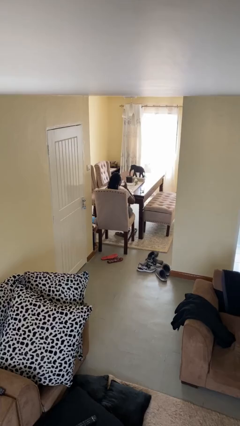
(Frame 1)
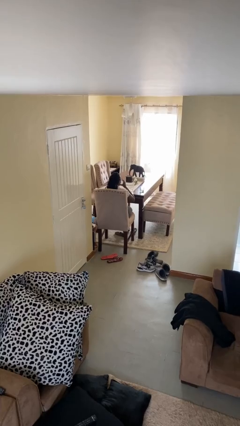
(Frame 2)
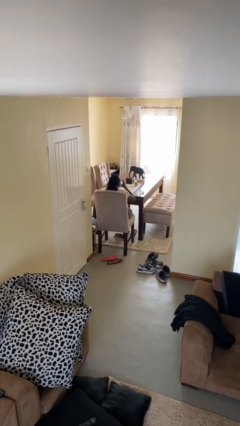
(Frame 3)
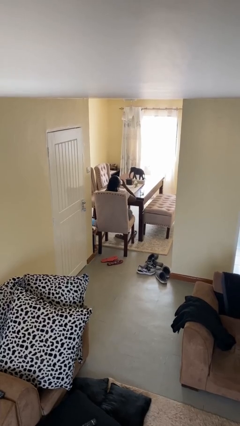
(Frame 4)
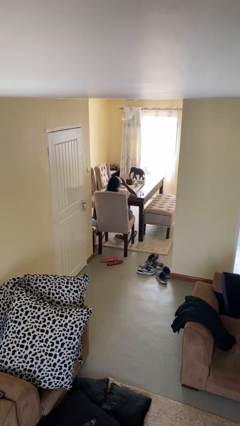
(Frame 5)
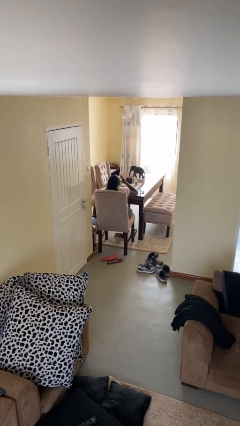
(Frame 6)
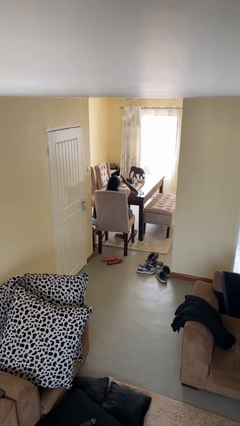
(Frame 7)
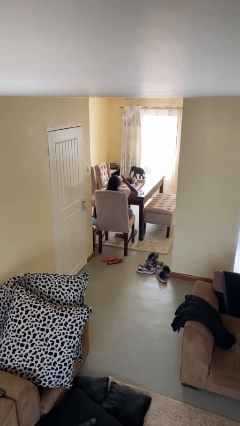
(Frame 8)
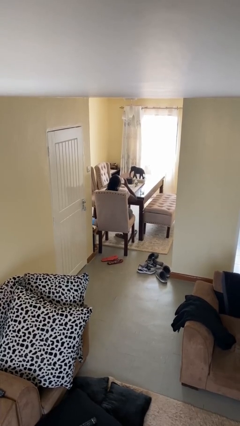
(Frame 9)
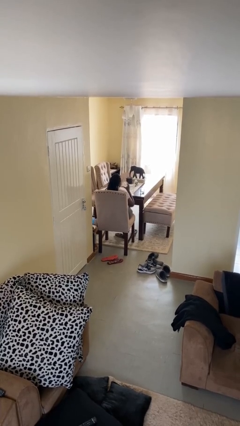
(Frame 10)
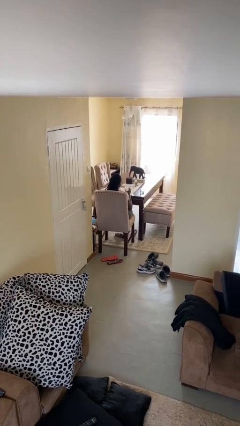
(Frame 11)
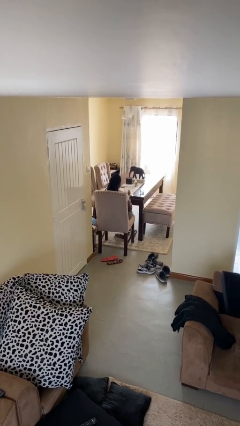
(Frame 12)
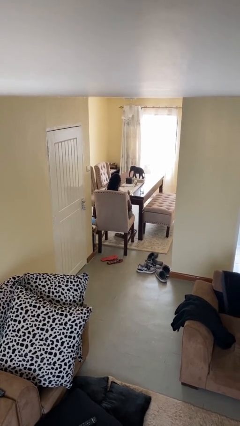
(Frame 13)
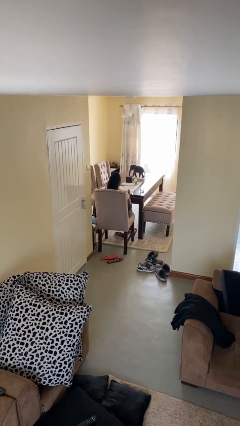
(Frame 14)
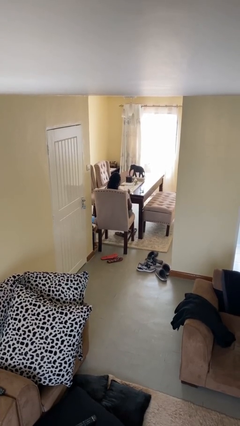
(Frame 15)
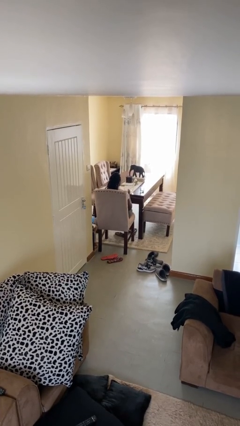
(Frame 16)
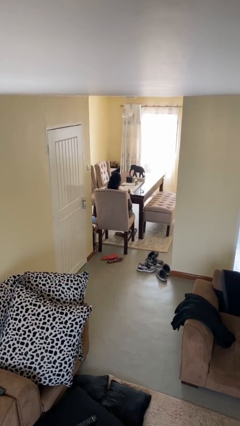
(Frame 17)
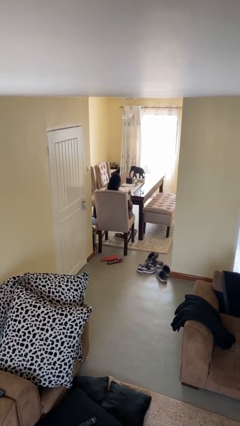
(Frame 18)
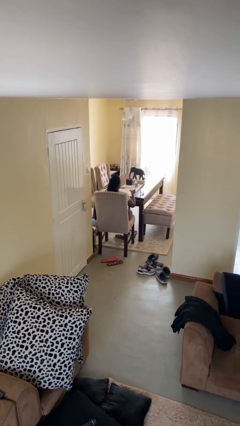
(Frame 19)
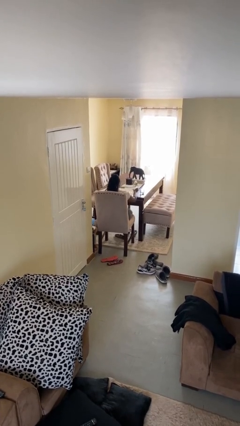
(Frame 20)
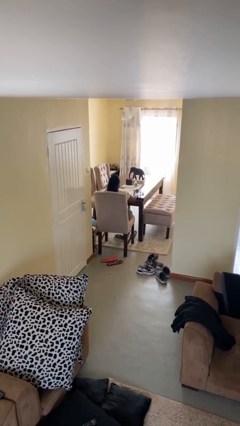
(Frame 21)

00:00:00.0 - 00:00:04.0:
person drinks from shotglass

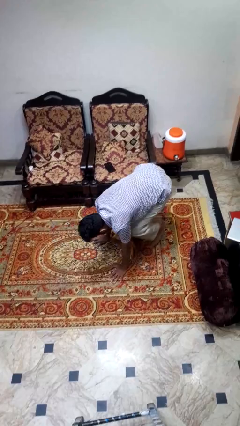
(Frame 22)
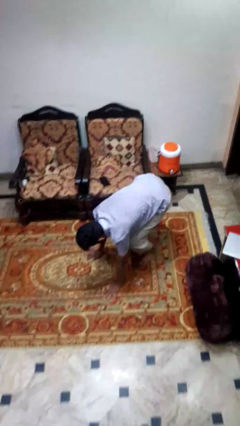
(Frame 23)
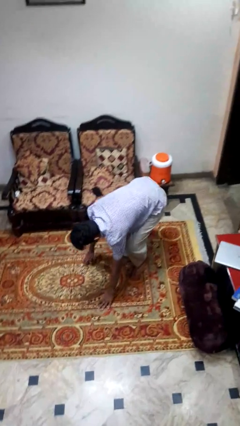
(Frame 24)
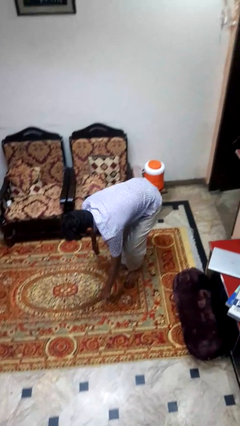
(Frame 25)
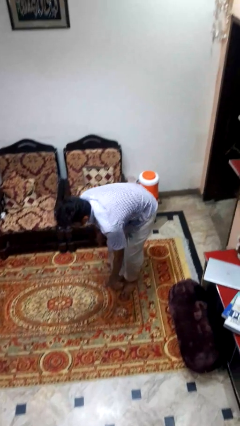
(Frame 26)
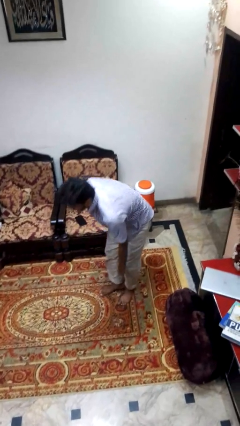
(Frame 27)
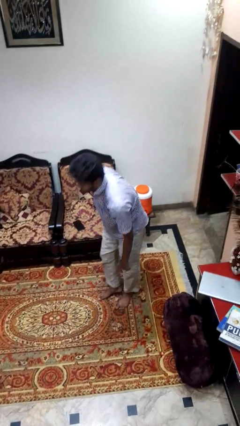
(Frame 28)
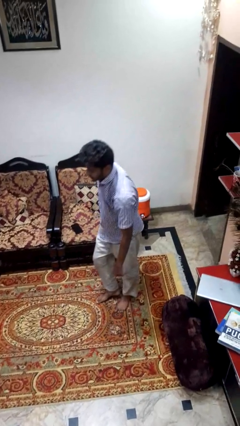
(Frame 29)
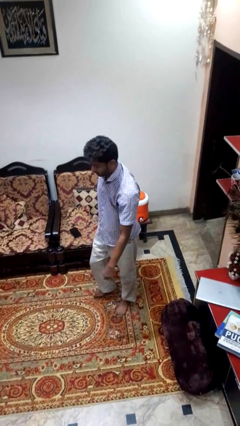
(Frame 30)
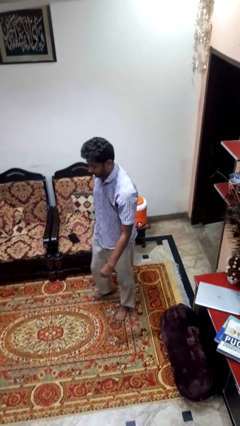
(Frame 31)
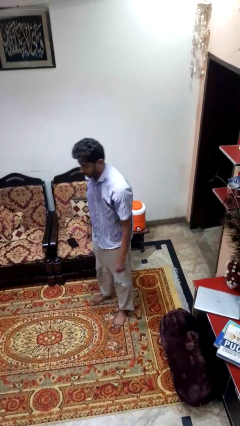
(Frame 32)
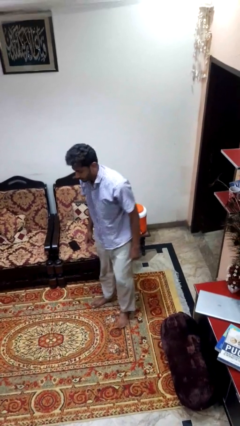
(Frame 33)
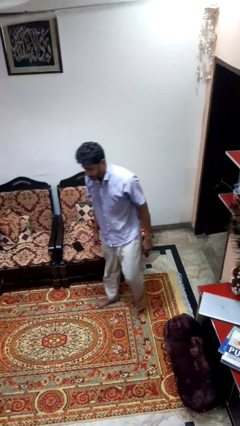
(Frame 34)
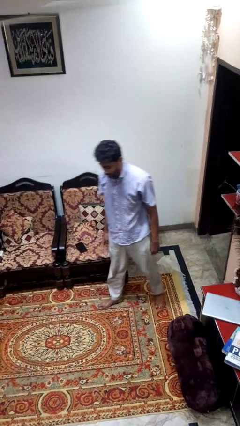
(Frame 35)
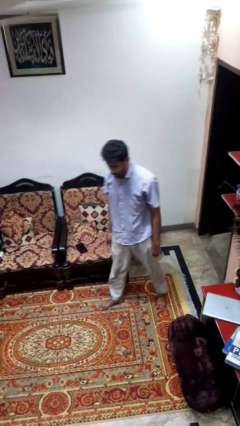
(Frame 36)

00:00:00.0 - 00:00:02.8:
person stands up from floor

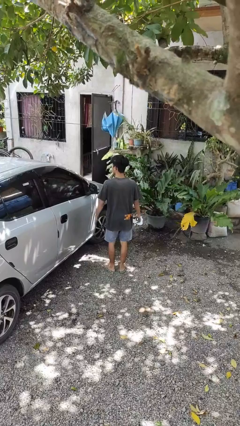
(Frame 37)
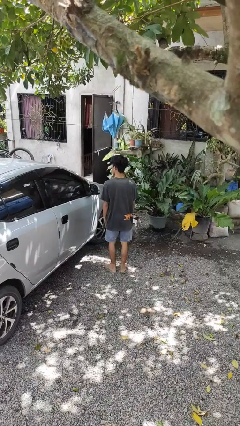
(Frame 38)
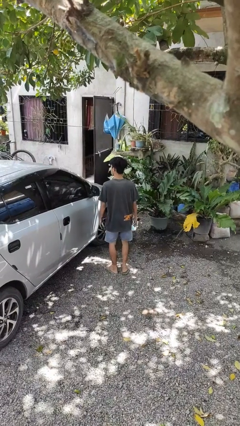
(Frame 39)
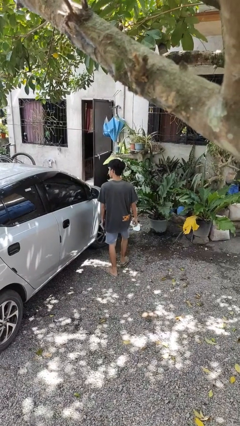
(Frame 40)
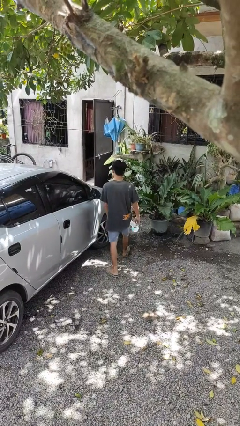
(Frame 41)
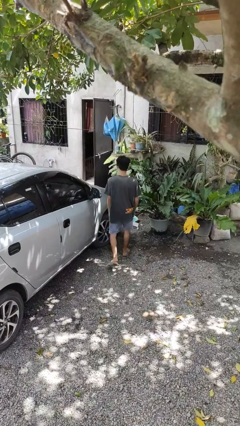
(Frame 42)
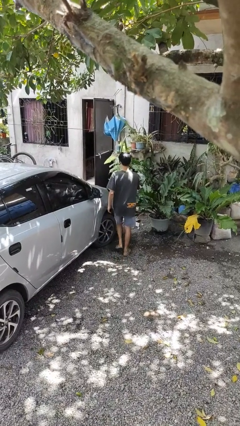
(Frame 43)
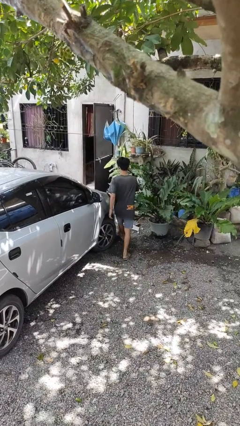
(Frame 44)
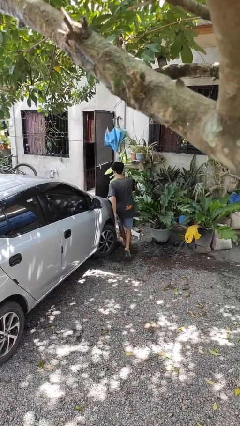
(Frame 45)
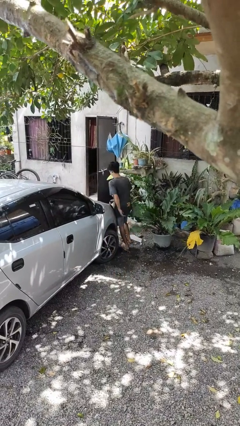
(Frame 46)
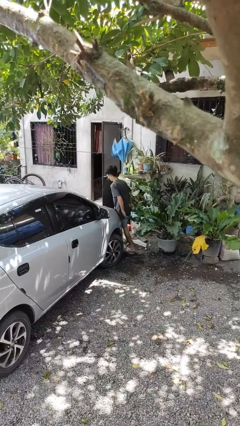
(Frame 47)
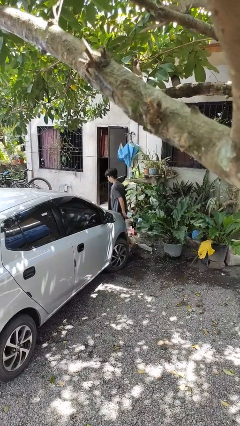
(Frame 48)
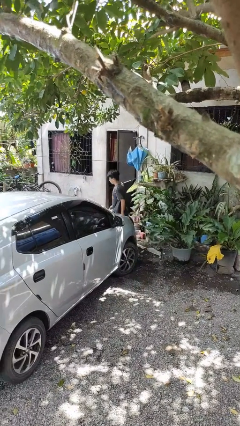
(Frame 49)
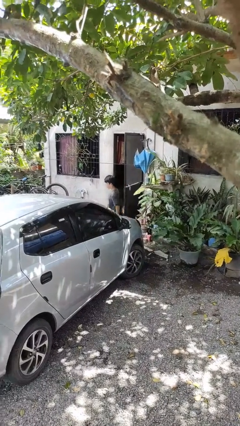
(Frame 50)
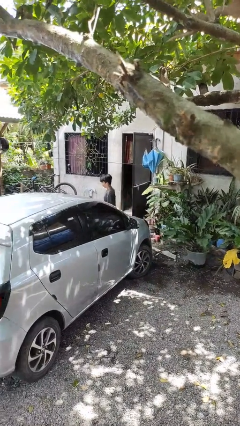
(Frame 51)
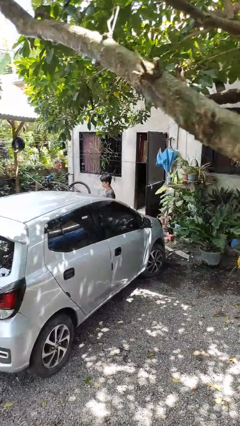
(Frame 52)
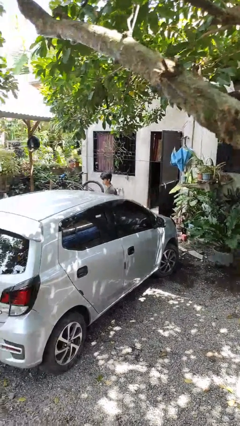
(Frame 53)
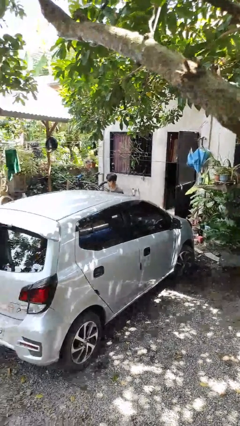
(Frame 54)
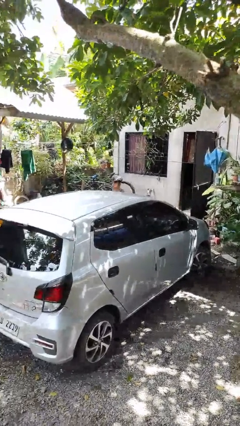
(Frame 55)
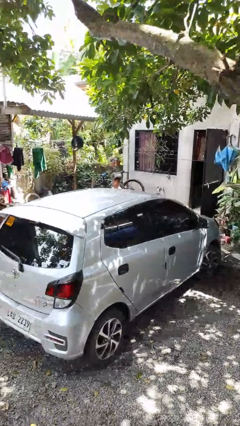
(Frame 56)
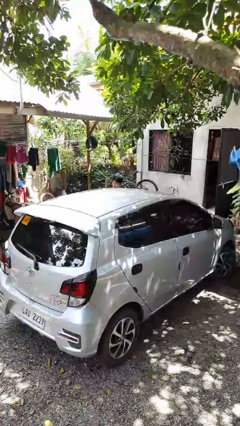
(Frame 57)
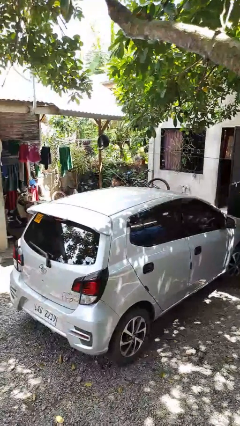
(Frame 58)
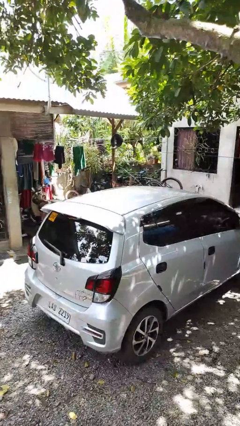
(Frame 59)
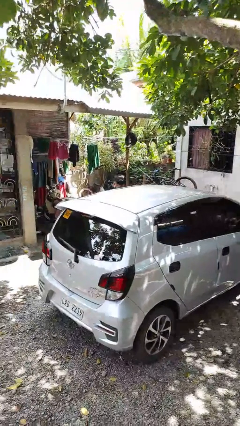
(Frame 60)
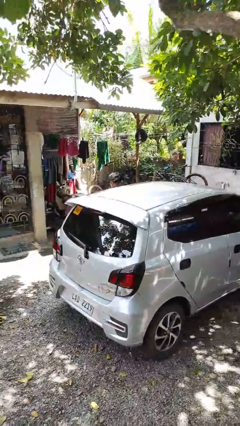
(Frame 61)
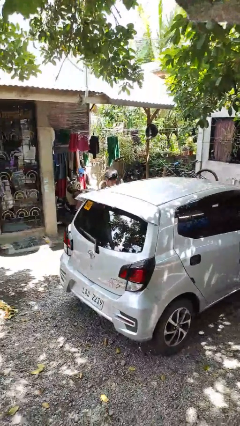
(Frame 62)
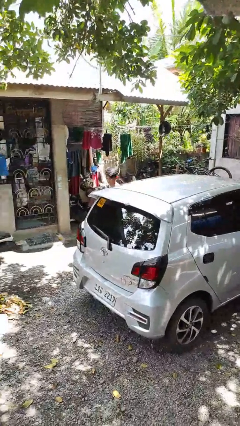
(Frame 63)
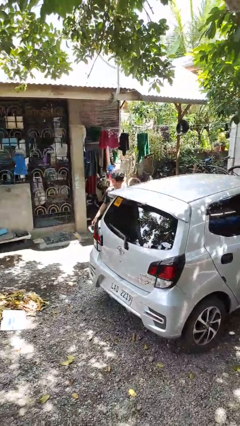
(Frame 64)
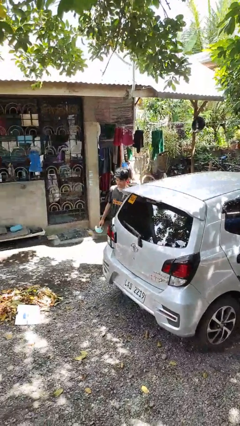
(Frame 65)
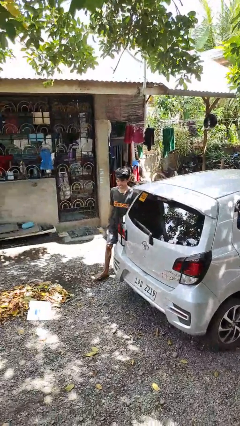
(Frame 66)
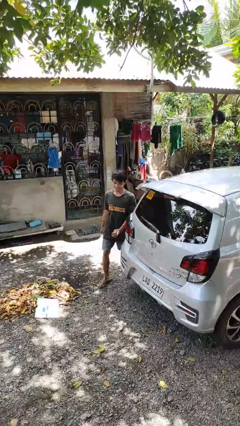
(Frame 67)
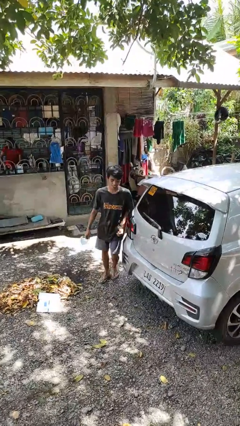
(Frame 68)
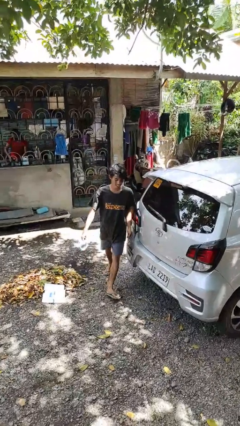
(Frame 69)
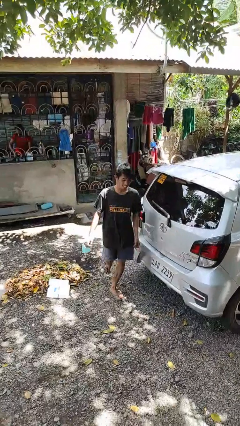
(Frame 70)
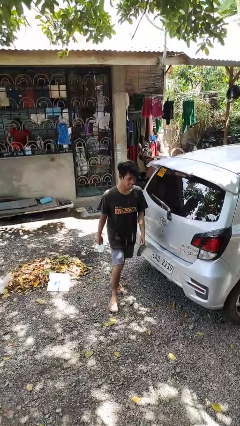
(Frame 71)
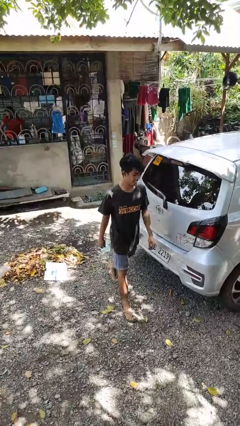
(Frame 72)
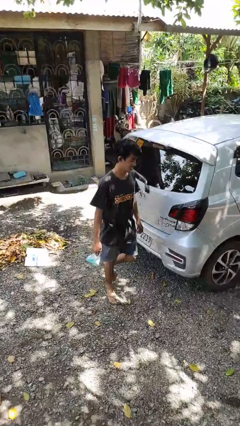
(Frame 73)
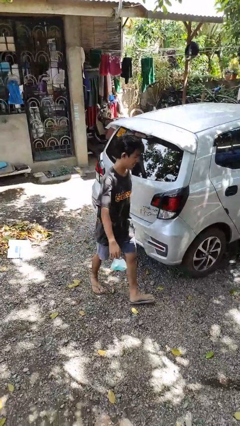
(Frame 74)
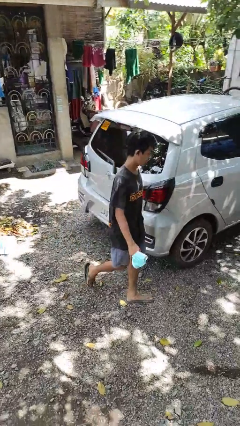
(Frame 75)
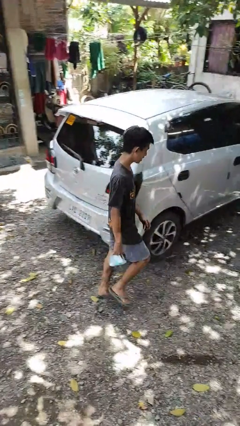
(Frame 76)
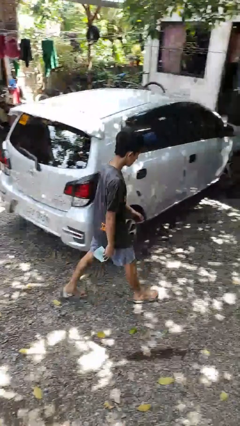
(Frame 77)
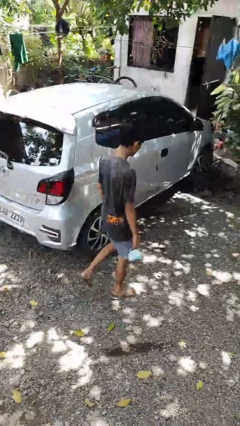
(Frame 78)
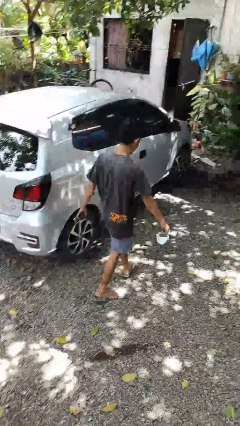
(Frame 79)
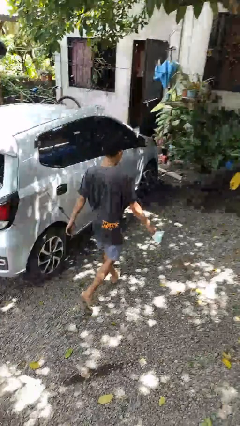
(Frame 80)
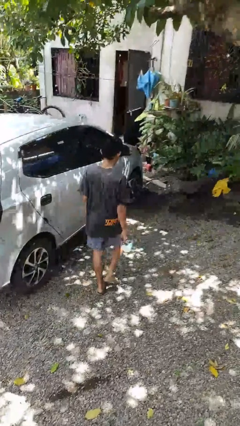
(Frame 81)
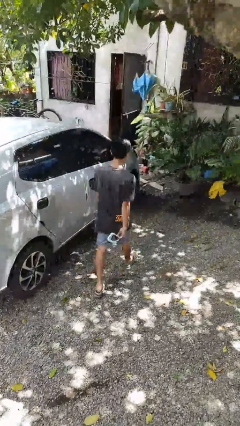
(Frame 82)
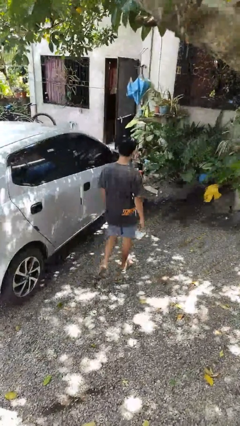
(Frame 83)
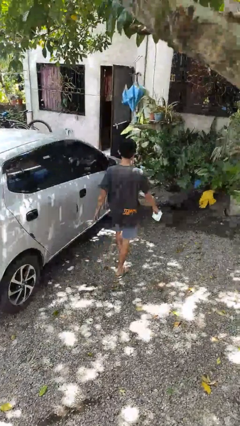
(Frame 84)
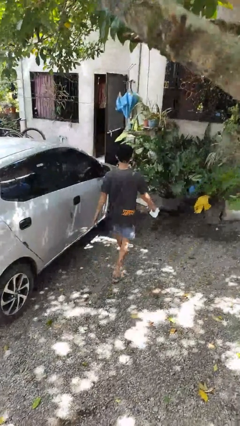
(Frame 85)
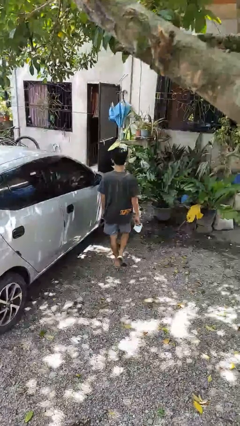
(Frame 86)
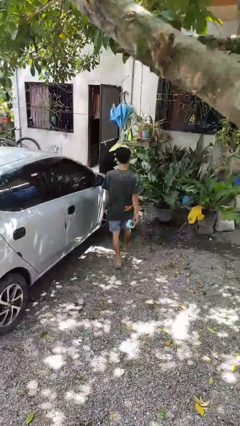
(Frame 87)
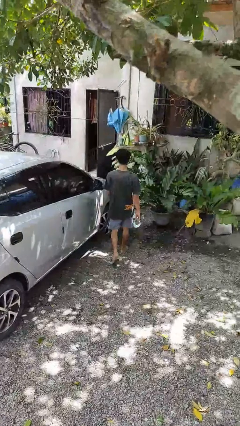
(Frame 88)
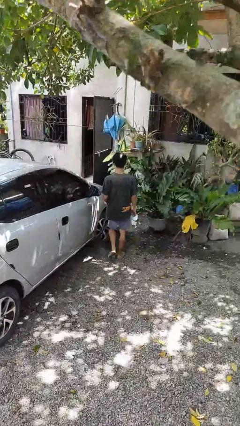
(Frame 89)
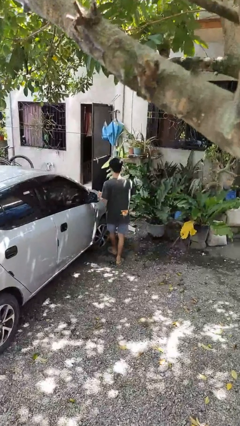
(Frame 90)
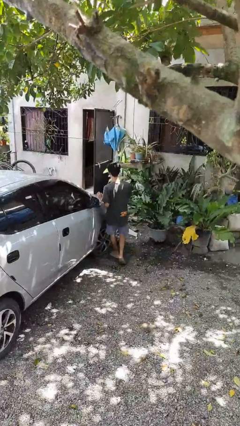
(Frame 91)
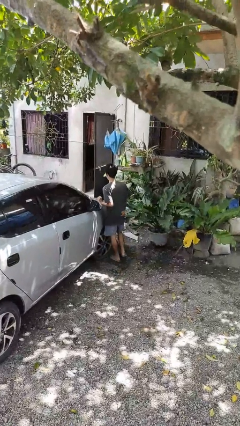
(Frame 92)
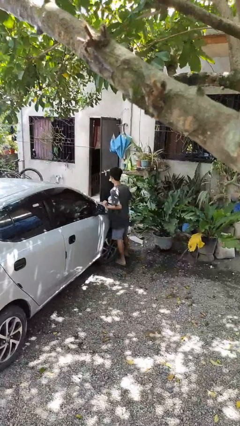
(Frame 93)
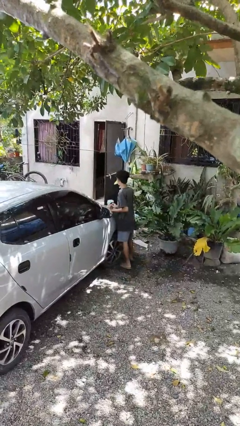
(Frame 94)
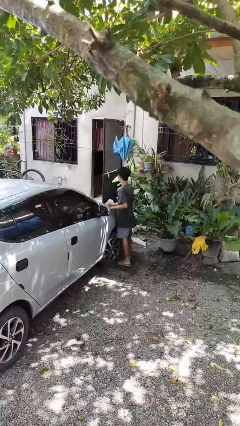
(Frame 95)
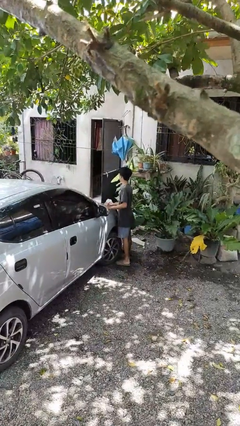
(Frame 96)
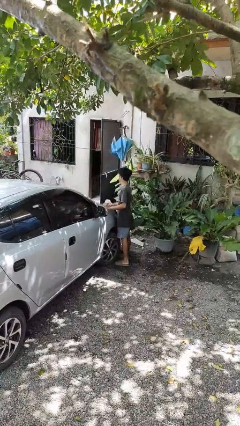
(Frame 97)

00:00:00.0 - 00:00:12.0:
person walks around car
